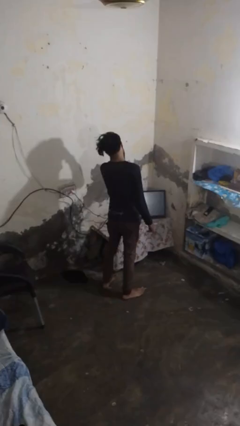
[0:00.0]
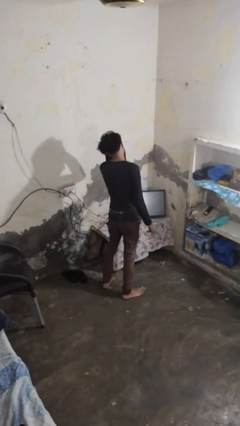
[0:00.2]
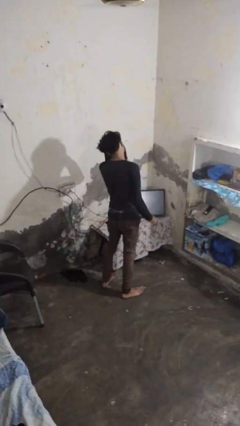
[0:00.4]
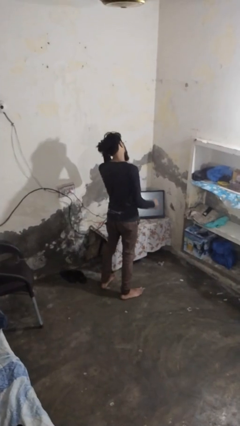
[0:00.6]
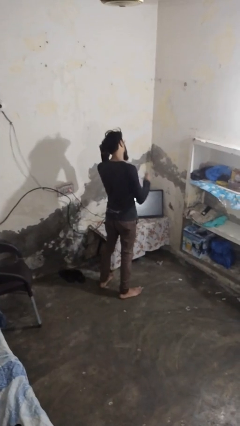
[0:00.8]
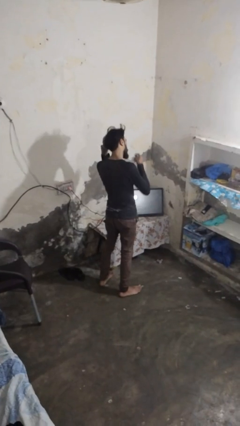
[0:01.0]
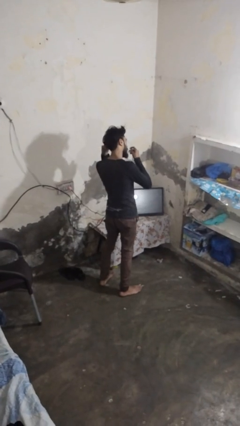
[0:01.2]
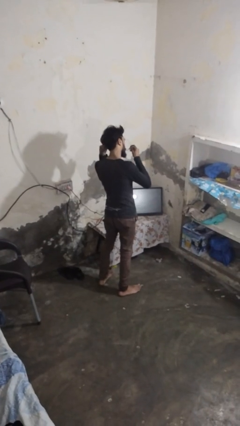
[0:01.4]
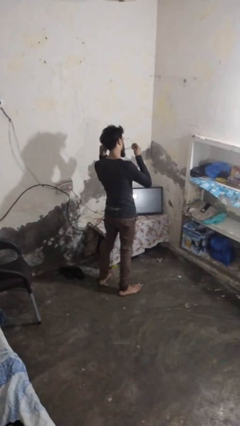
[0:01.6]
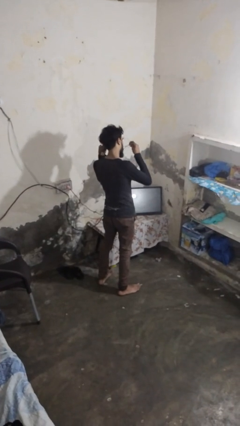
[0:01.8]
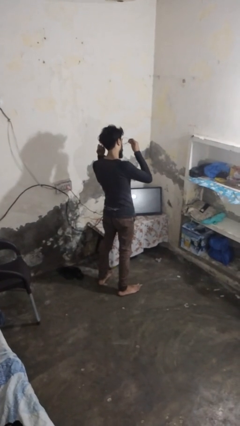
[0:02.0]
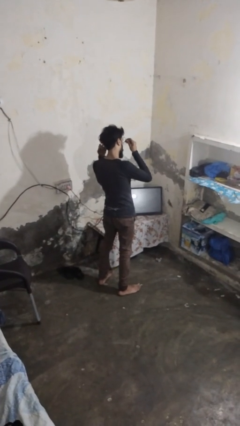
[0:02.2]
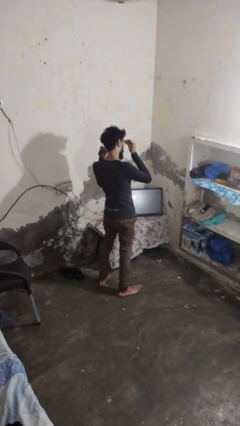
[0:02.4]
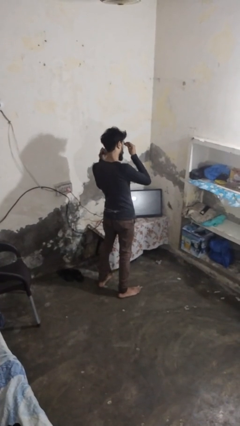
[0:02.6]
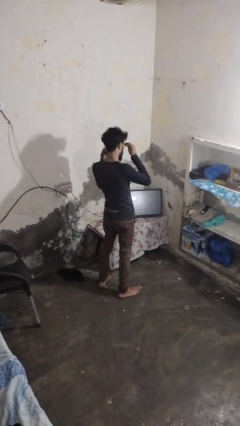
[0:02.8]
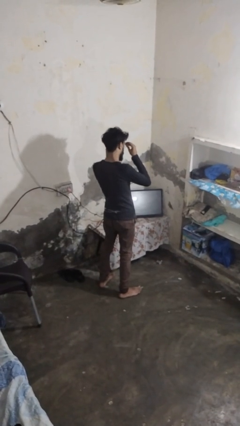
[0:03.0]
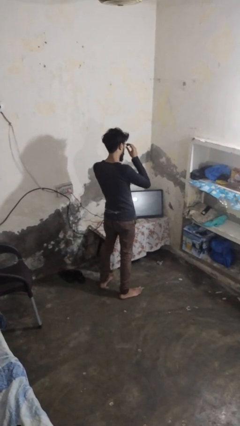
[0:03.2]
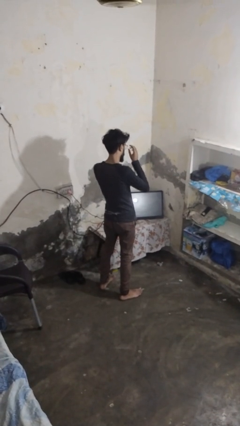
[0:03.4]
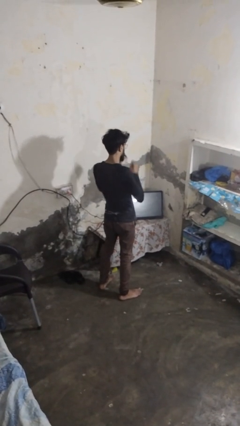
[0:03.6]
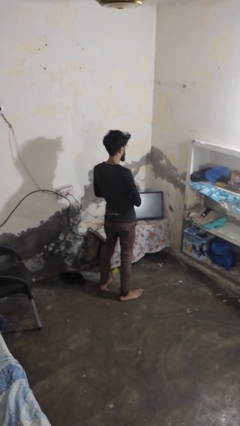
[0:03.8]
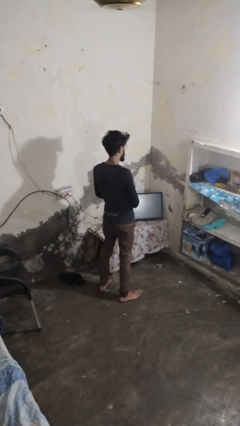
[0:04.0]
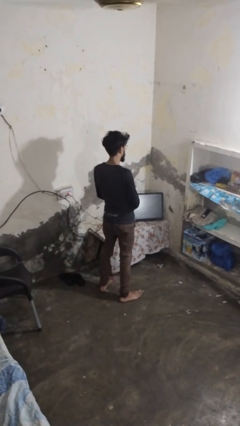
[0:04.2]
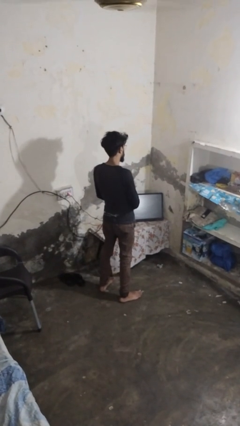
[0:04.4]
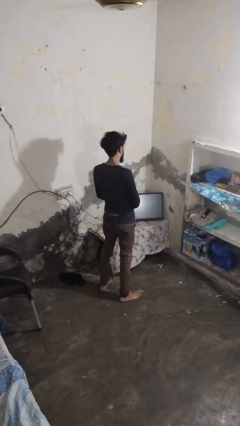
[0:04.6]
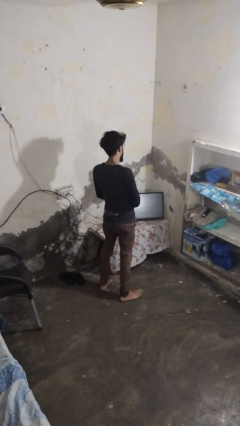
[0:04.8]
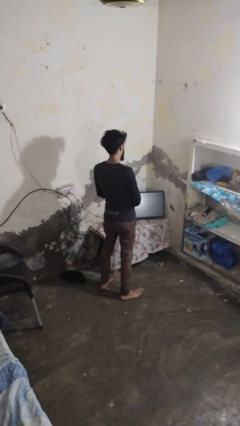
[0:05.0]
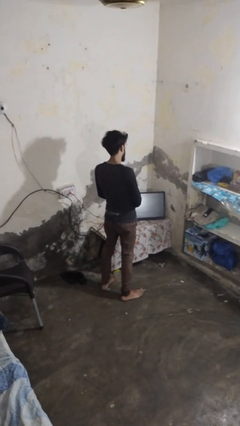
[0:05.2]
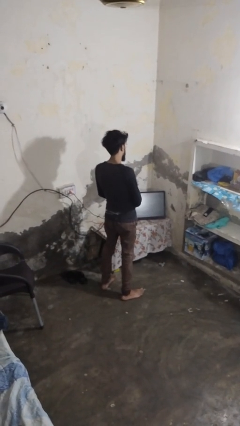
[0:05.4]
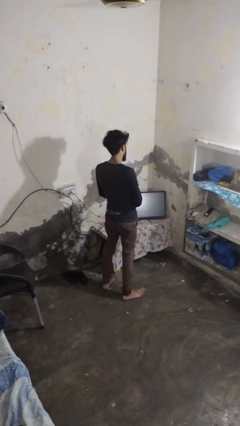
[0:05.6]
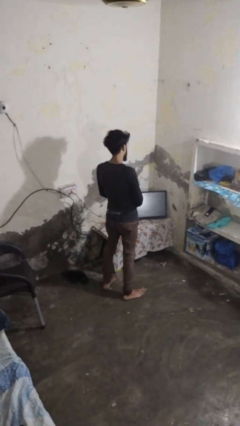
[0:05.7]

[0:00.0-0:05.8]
person puts on glasses

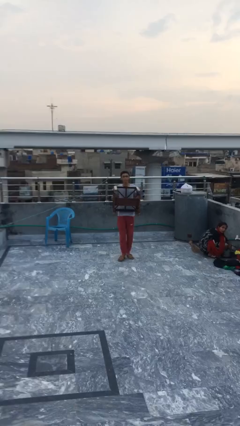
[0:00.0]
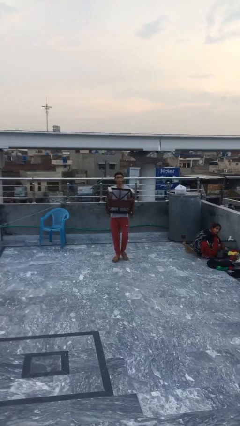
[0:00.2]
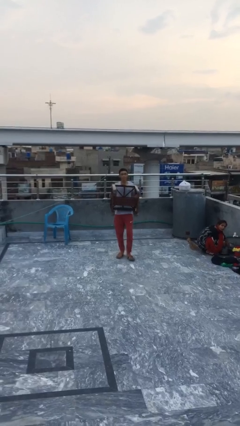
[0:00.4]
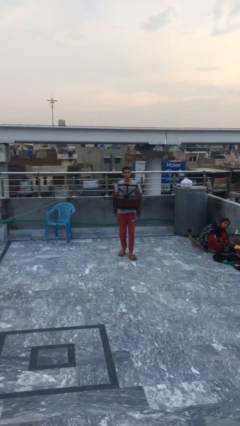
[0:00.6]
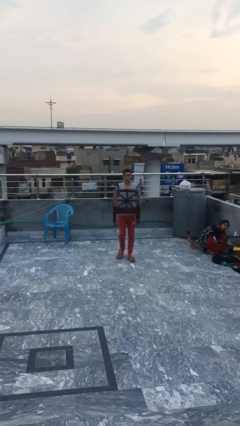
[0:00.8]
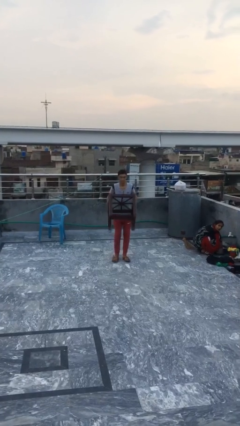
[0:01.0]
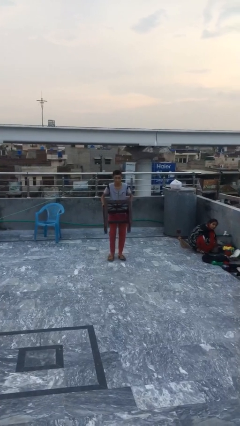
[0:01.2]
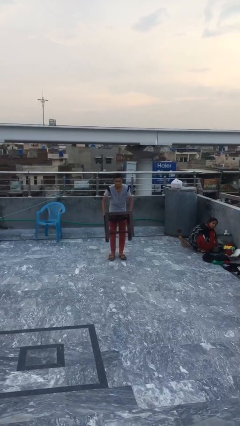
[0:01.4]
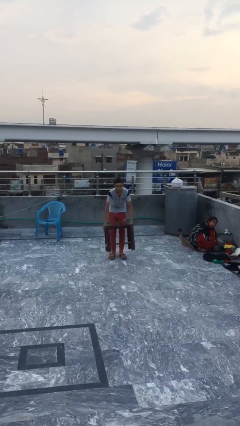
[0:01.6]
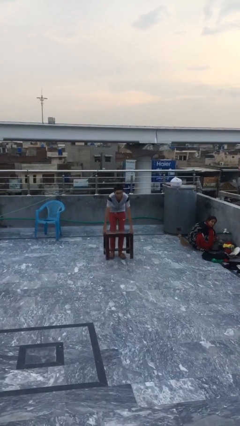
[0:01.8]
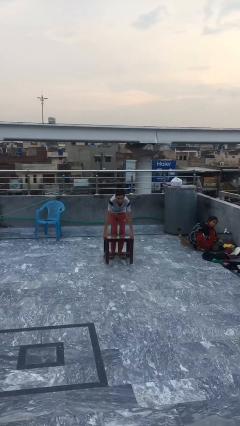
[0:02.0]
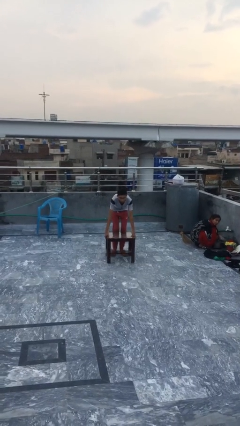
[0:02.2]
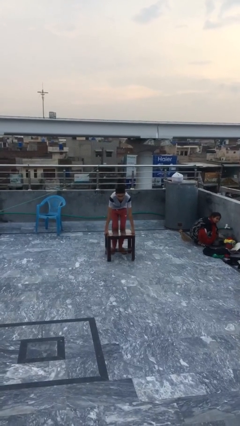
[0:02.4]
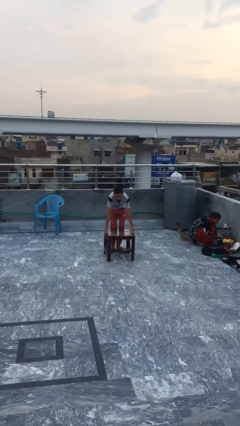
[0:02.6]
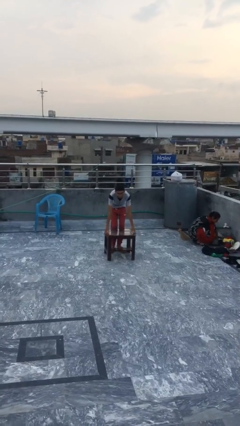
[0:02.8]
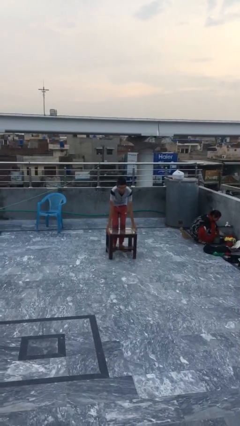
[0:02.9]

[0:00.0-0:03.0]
person puts down object on floor

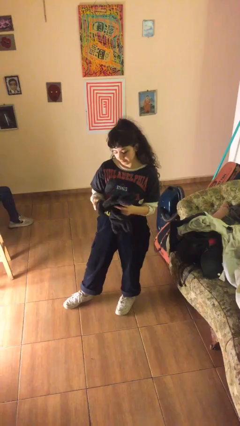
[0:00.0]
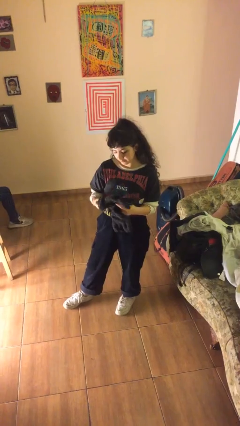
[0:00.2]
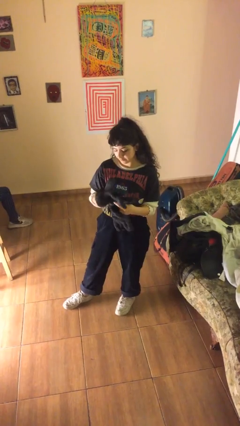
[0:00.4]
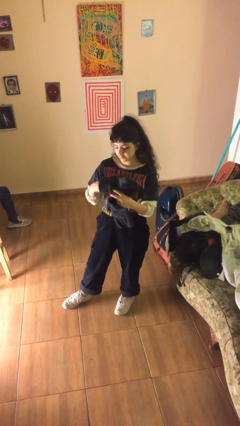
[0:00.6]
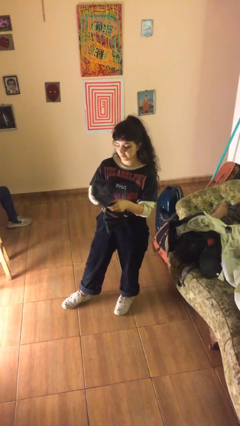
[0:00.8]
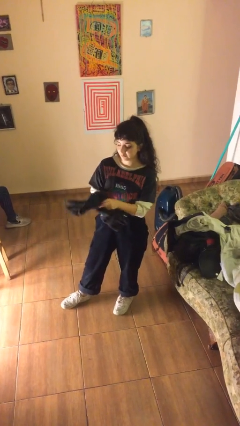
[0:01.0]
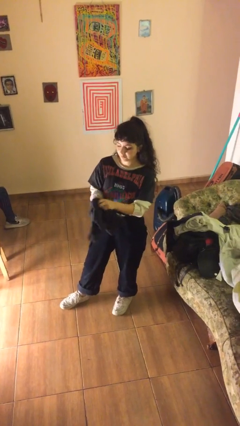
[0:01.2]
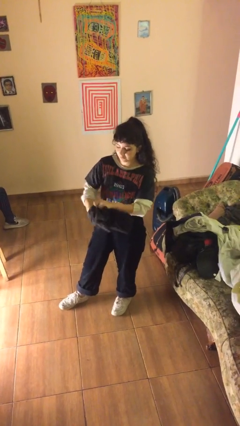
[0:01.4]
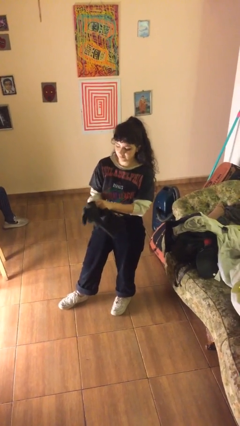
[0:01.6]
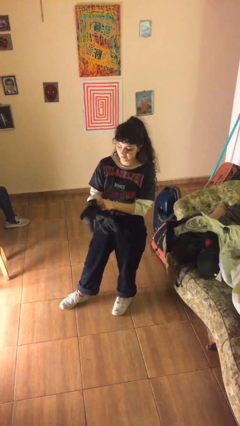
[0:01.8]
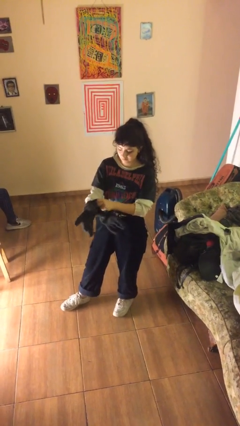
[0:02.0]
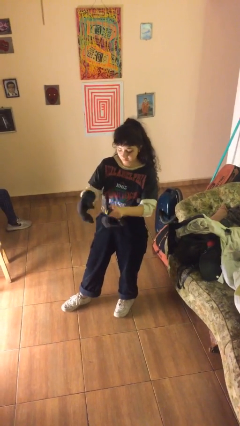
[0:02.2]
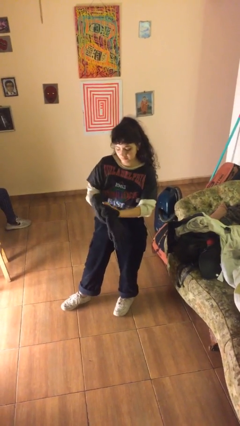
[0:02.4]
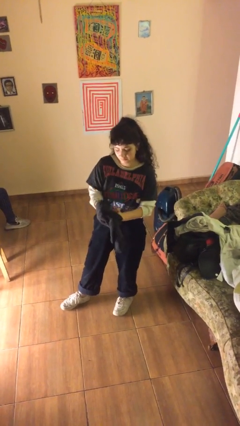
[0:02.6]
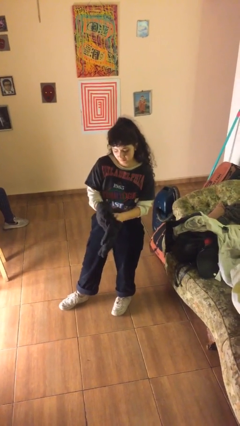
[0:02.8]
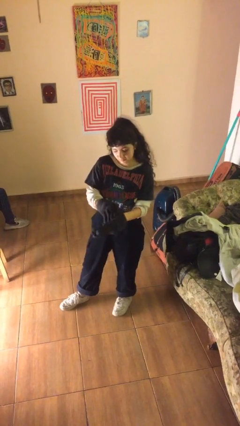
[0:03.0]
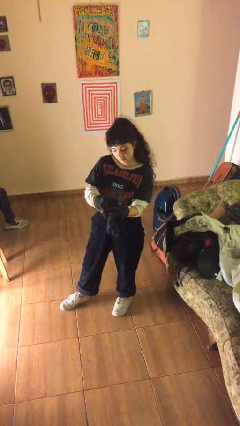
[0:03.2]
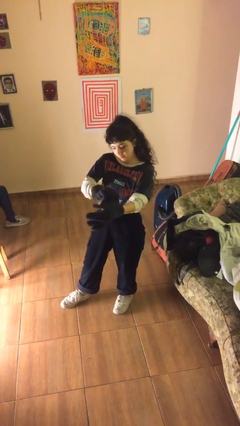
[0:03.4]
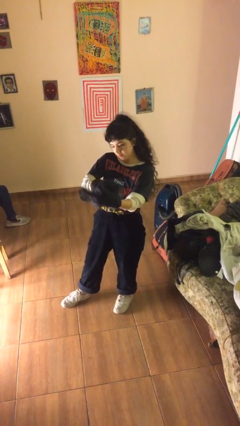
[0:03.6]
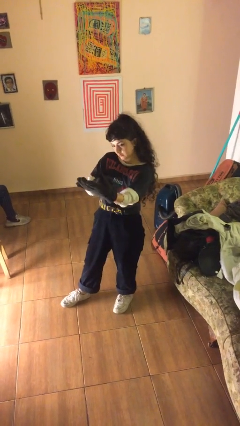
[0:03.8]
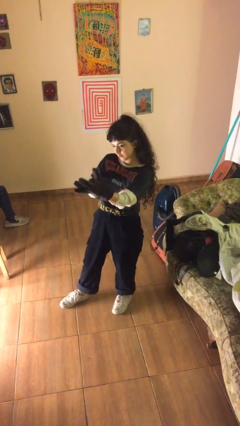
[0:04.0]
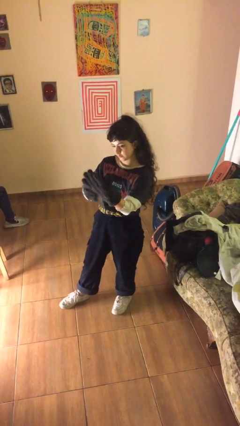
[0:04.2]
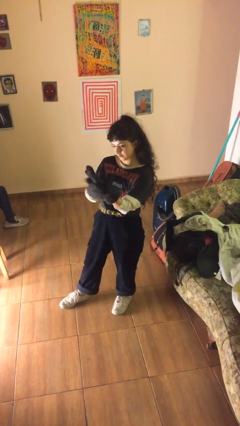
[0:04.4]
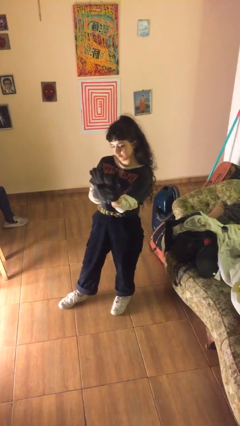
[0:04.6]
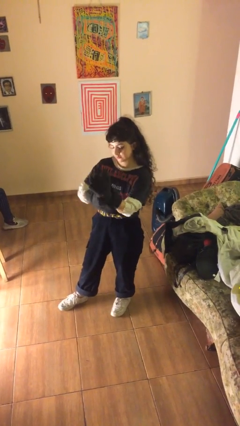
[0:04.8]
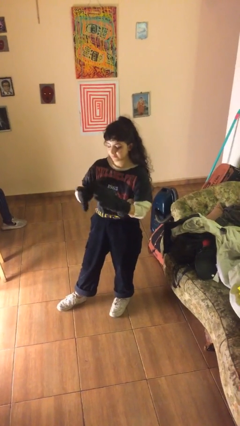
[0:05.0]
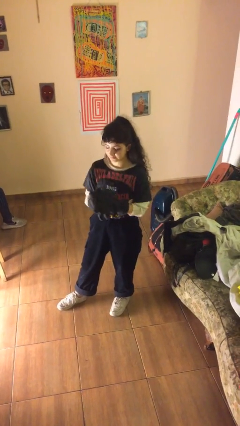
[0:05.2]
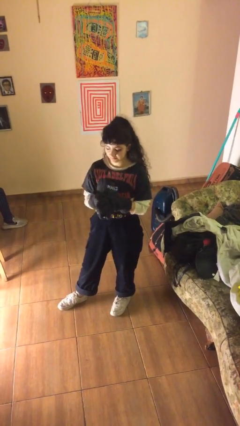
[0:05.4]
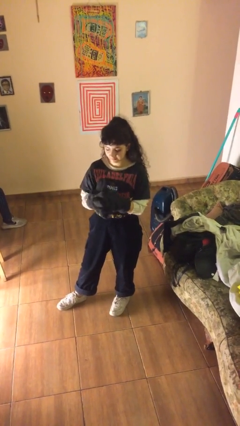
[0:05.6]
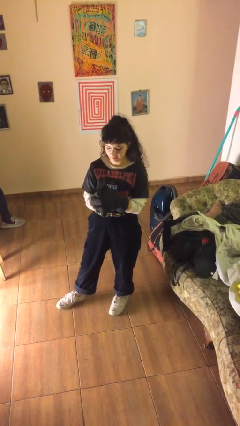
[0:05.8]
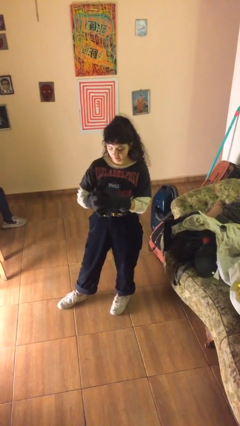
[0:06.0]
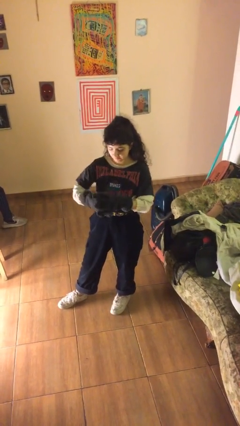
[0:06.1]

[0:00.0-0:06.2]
person puts on gloves

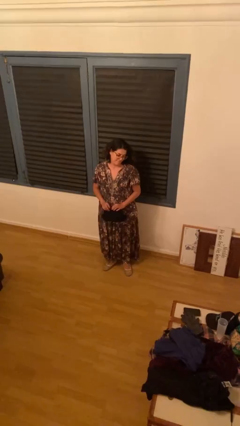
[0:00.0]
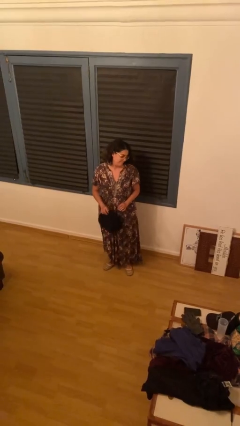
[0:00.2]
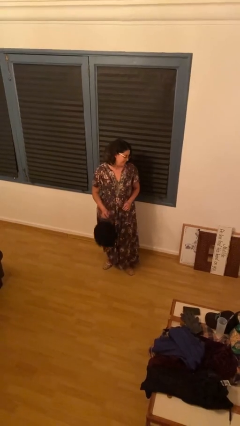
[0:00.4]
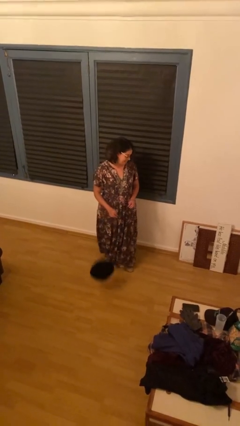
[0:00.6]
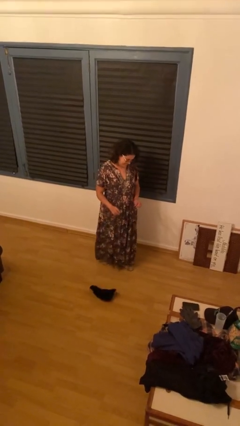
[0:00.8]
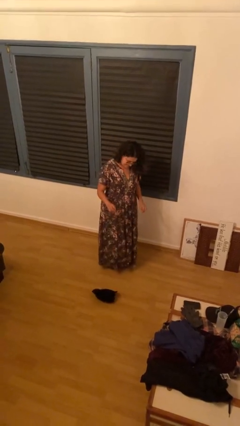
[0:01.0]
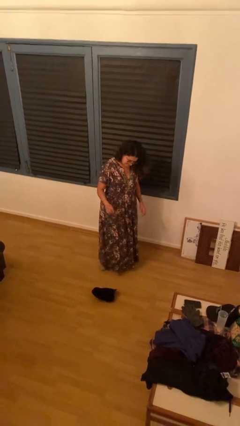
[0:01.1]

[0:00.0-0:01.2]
person drops object

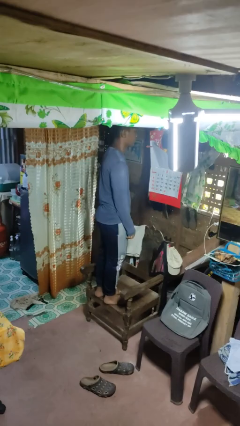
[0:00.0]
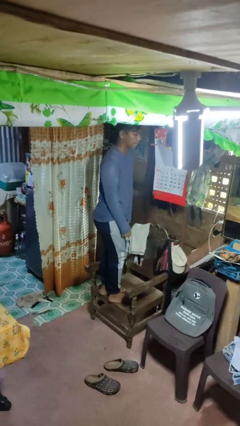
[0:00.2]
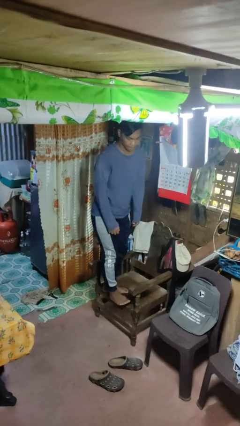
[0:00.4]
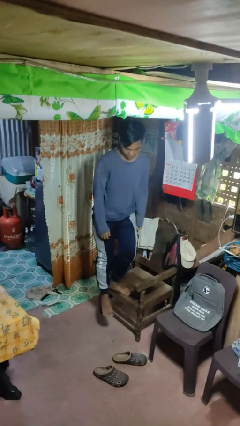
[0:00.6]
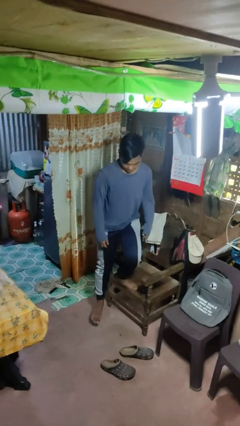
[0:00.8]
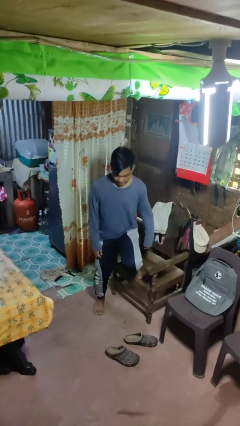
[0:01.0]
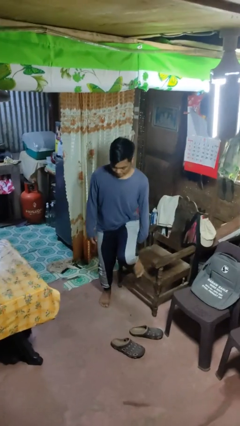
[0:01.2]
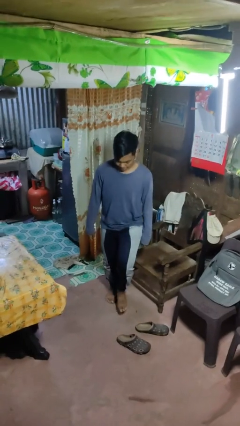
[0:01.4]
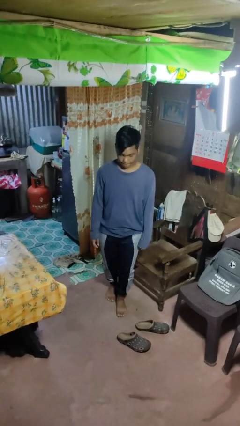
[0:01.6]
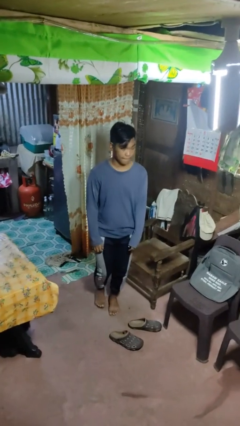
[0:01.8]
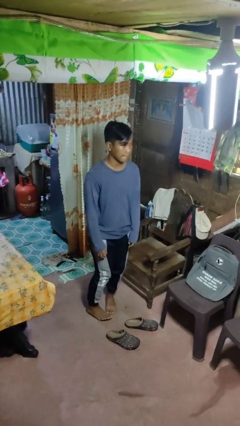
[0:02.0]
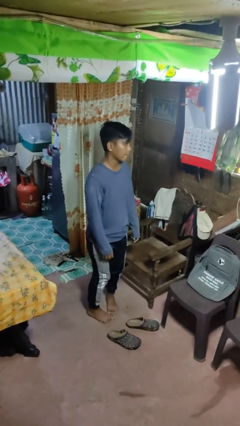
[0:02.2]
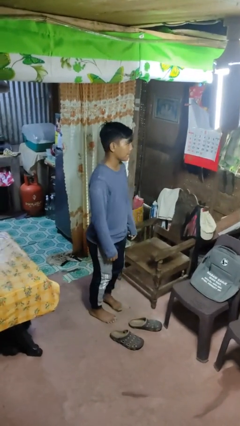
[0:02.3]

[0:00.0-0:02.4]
person climbs off chair
